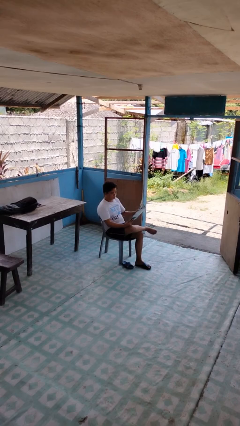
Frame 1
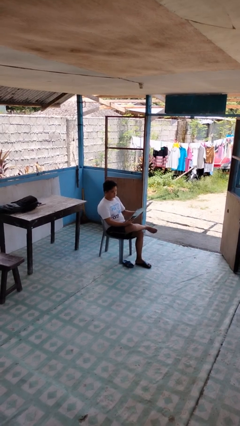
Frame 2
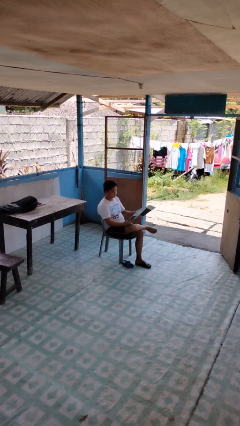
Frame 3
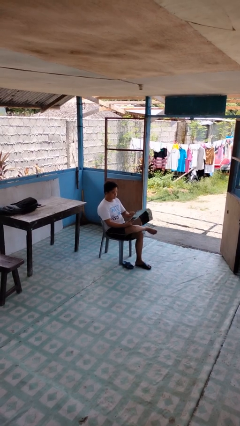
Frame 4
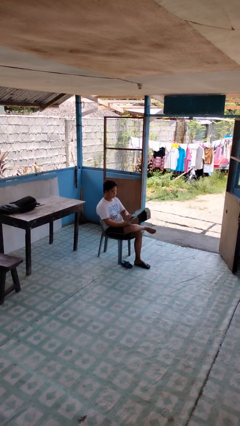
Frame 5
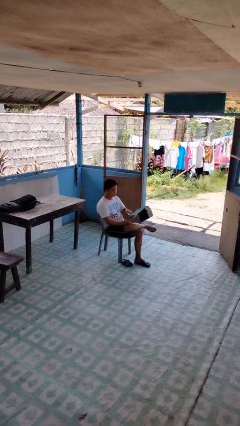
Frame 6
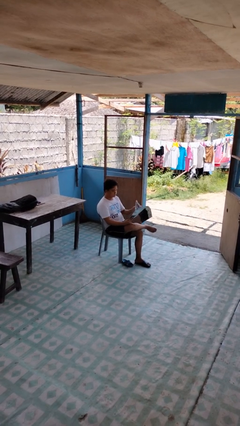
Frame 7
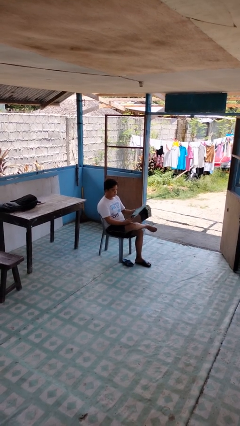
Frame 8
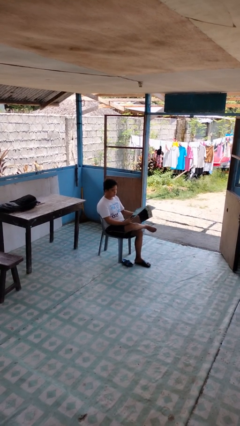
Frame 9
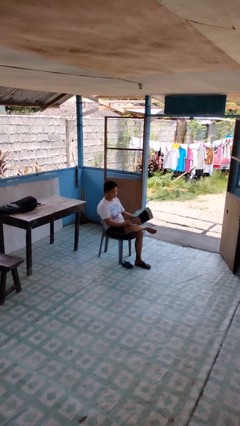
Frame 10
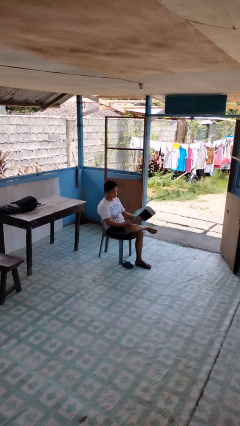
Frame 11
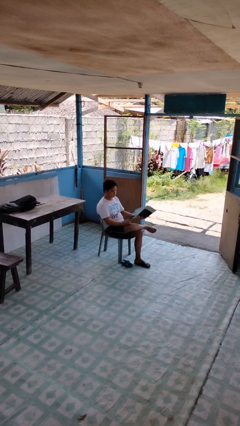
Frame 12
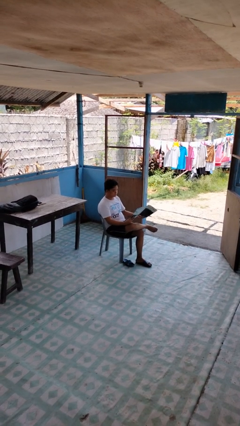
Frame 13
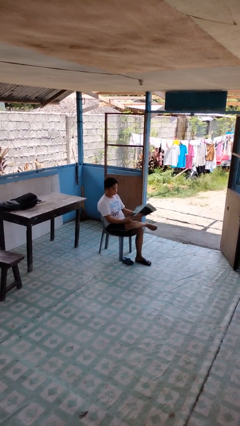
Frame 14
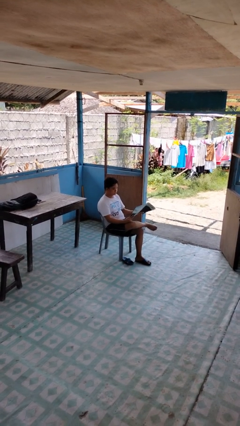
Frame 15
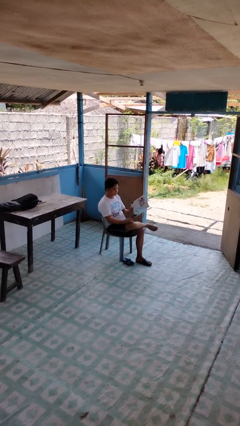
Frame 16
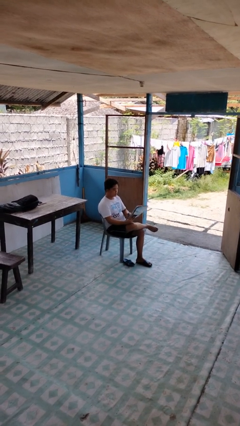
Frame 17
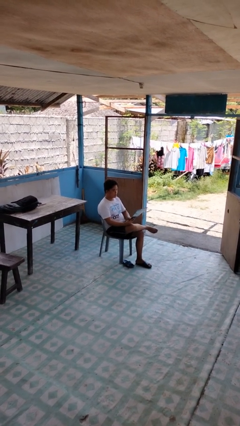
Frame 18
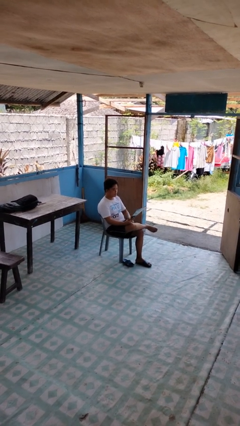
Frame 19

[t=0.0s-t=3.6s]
person reads magazine

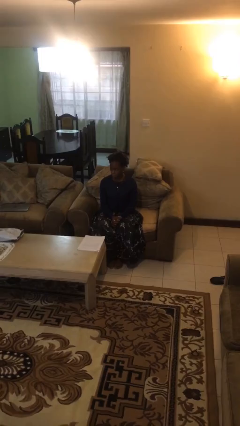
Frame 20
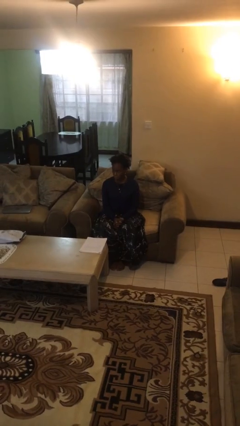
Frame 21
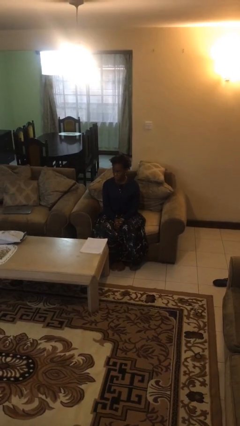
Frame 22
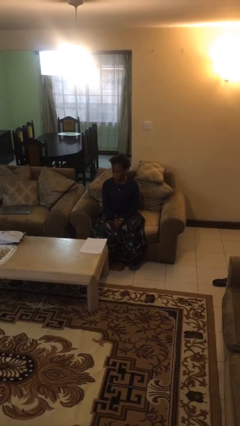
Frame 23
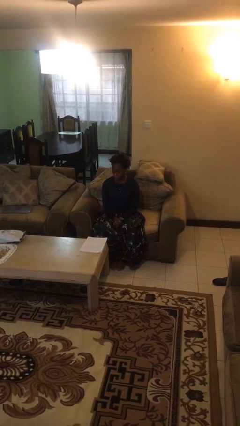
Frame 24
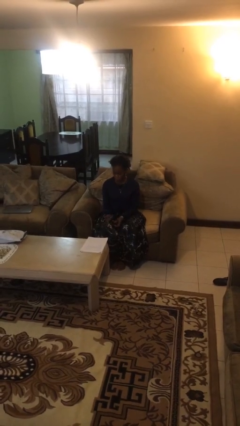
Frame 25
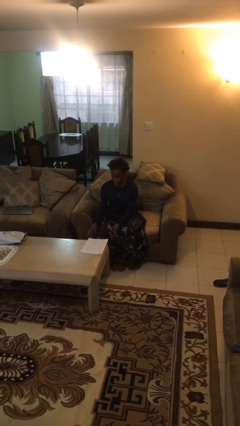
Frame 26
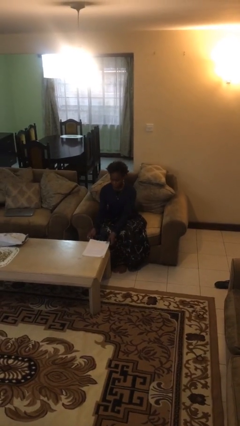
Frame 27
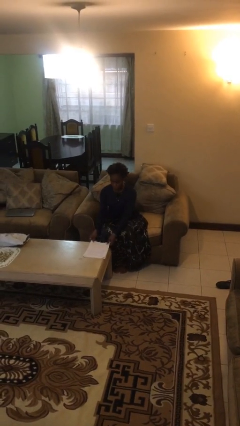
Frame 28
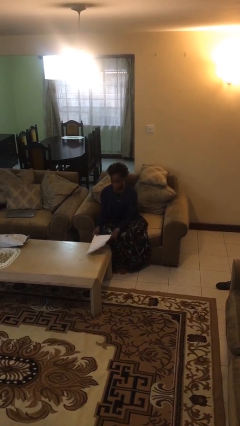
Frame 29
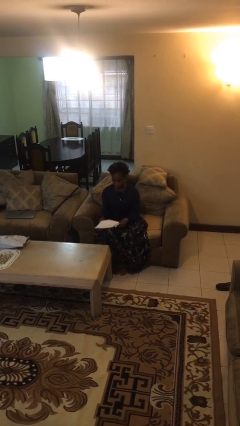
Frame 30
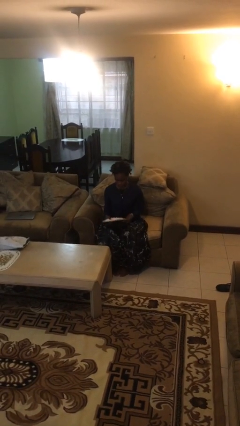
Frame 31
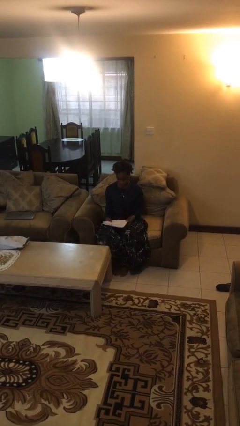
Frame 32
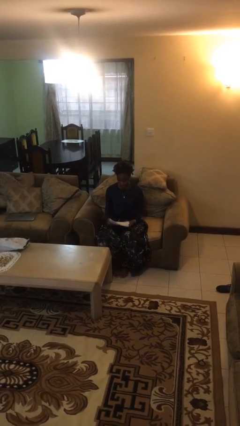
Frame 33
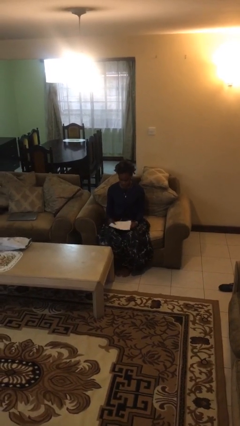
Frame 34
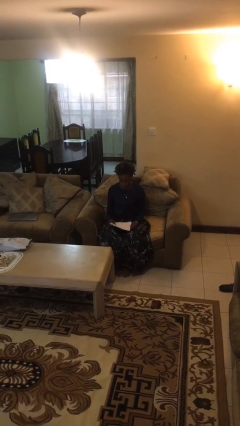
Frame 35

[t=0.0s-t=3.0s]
person picks up object from table

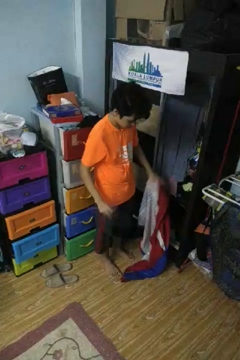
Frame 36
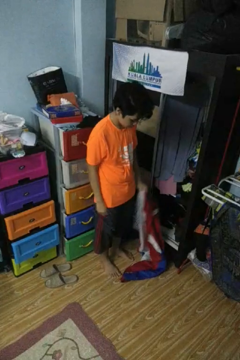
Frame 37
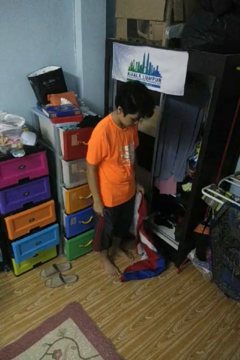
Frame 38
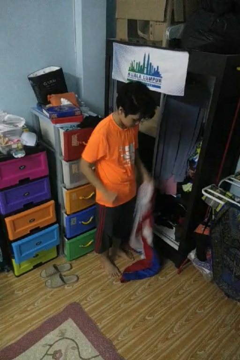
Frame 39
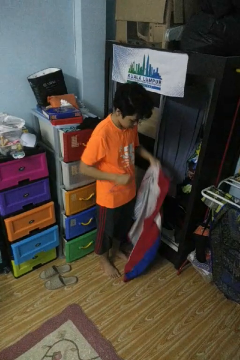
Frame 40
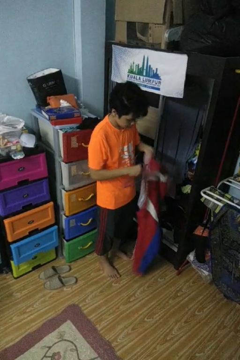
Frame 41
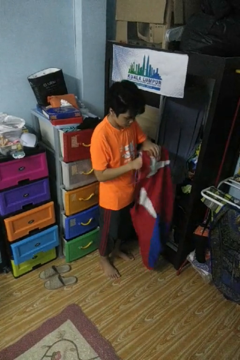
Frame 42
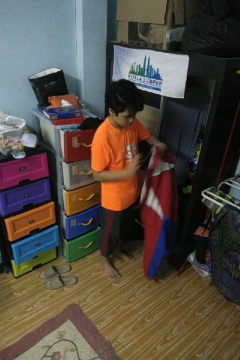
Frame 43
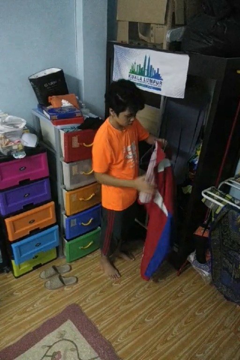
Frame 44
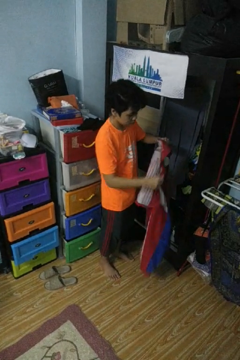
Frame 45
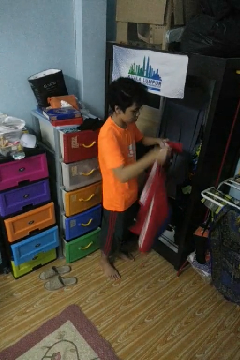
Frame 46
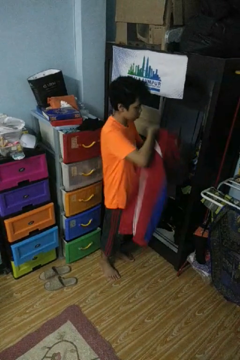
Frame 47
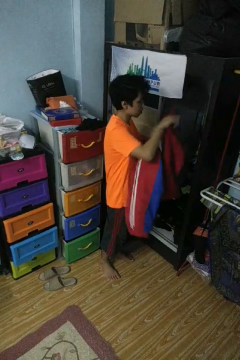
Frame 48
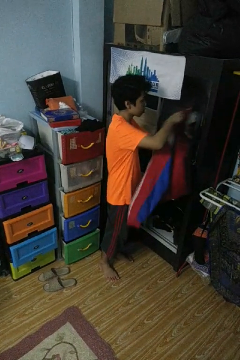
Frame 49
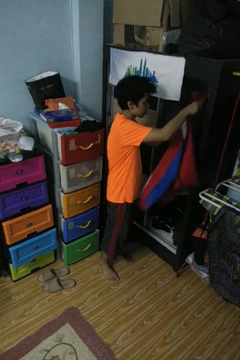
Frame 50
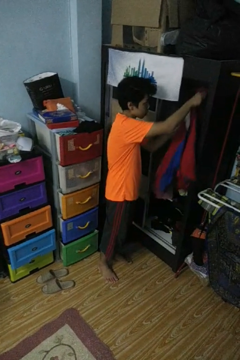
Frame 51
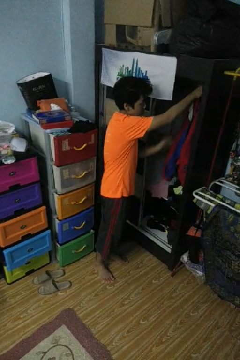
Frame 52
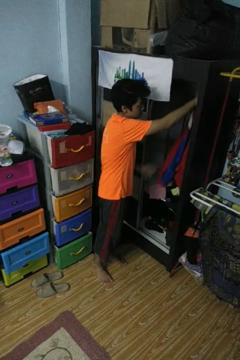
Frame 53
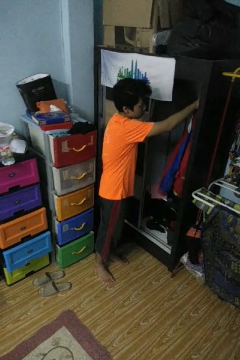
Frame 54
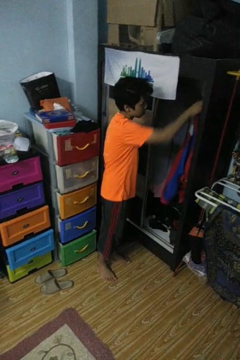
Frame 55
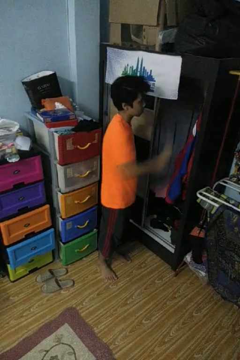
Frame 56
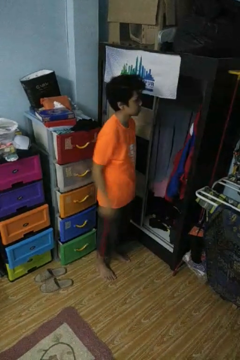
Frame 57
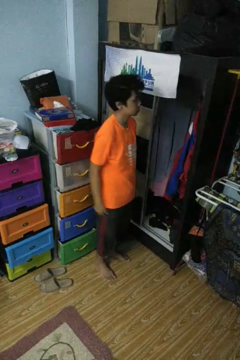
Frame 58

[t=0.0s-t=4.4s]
person puts clothes into closet

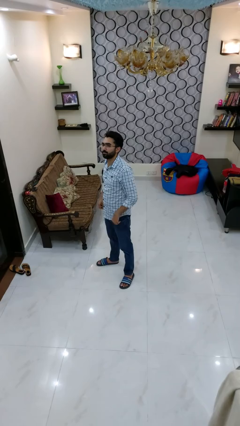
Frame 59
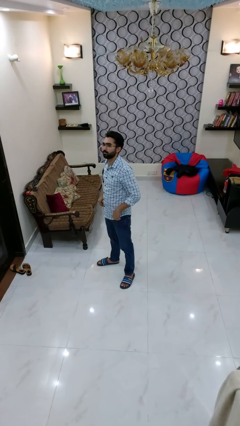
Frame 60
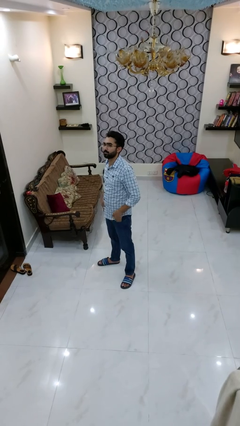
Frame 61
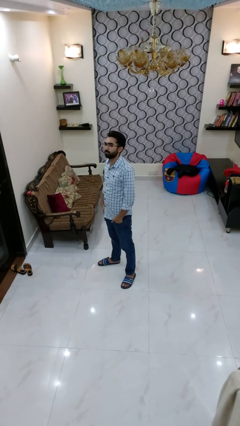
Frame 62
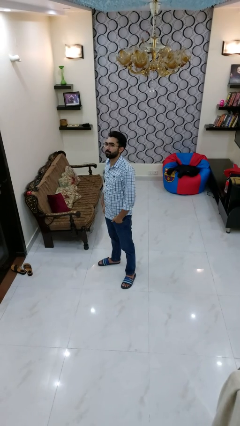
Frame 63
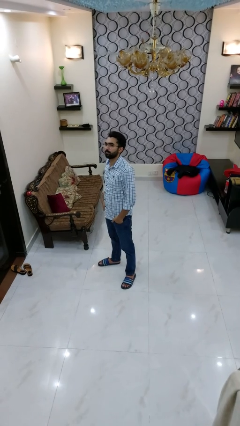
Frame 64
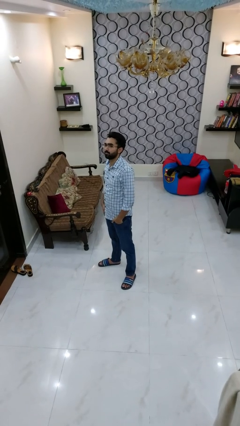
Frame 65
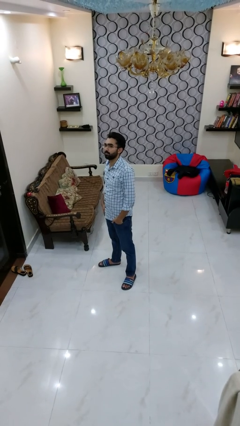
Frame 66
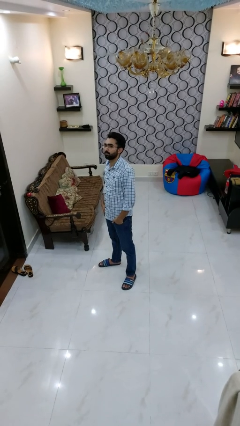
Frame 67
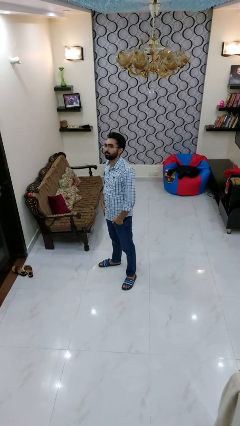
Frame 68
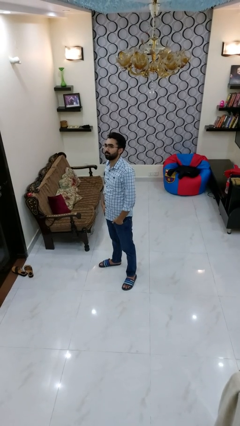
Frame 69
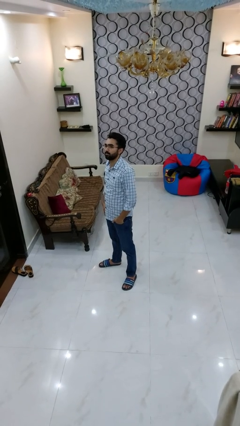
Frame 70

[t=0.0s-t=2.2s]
person puts hands in back pockets

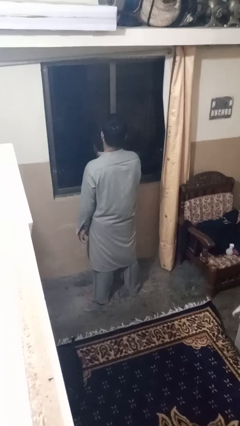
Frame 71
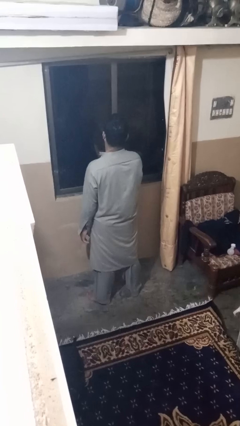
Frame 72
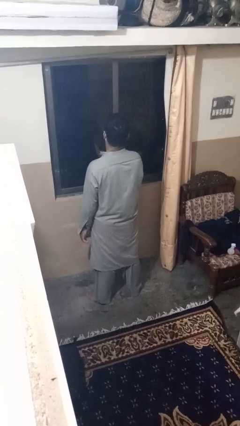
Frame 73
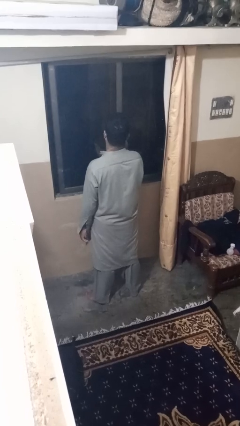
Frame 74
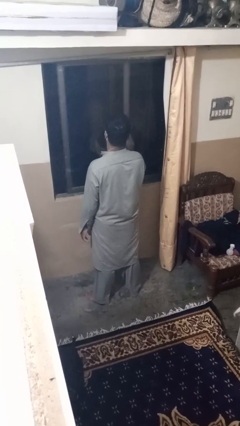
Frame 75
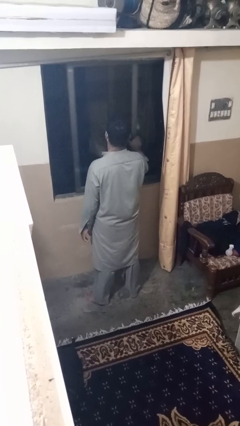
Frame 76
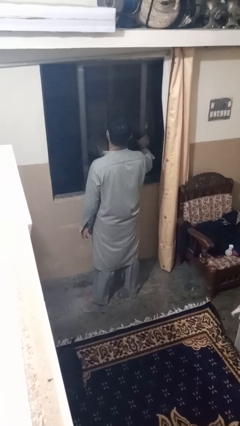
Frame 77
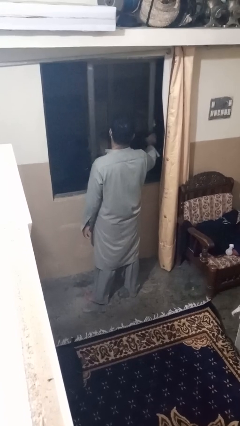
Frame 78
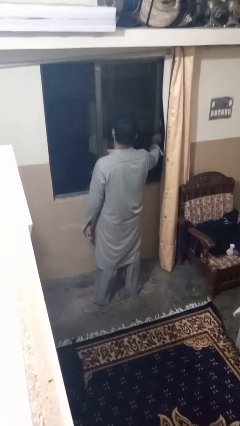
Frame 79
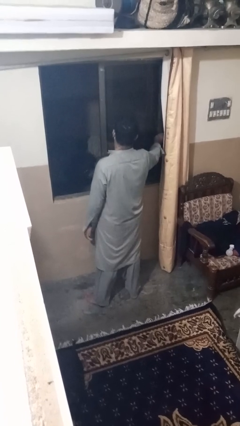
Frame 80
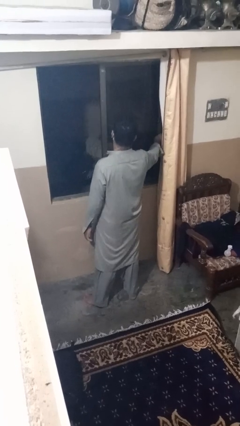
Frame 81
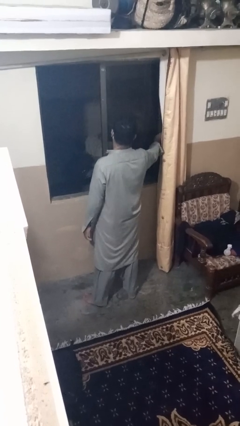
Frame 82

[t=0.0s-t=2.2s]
person opens home window

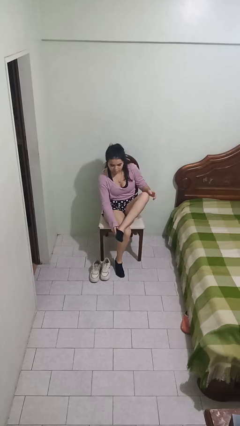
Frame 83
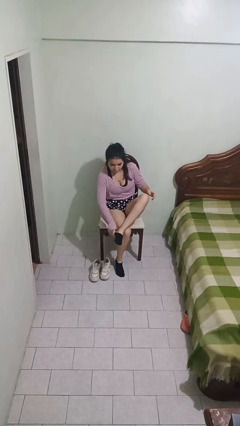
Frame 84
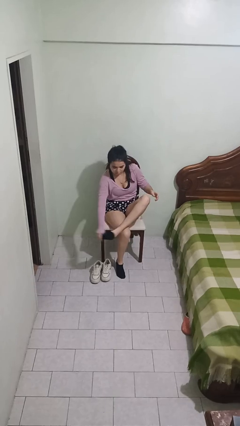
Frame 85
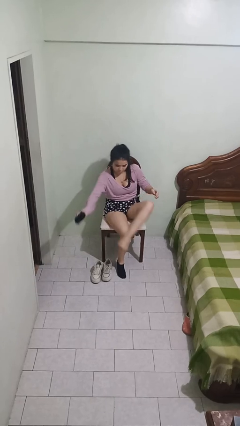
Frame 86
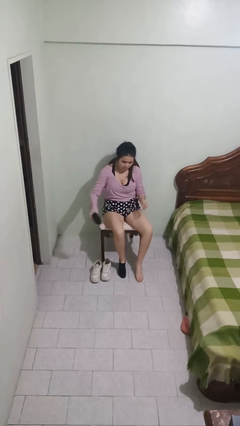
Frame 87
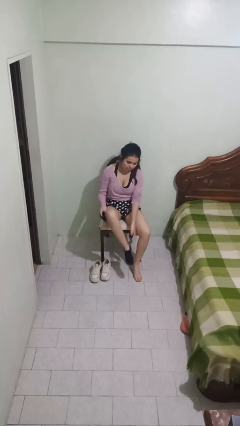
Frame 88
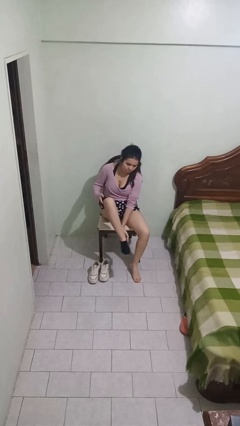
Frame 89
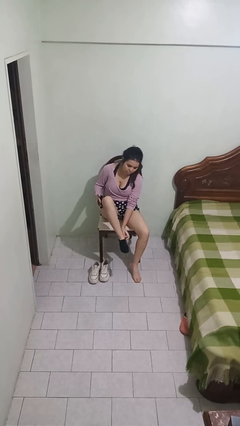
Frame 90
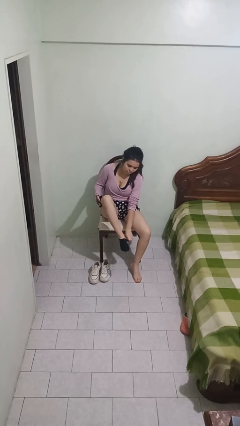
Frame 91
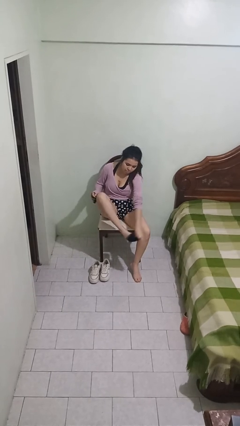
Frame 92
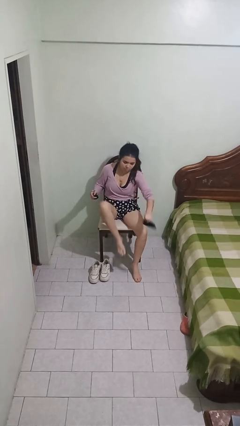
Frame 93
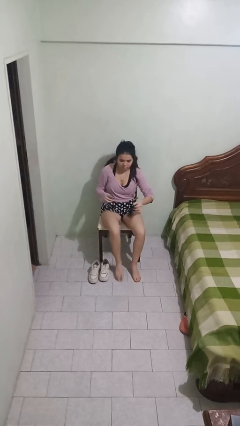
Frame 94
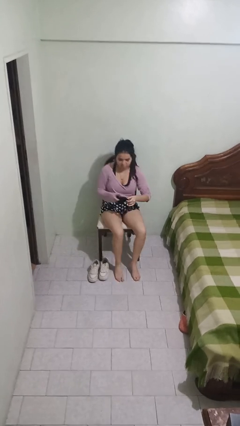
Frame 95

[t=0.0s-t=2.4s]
person takes off socks

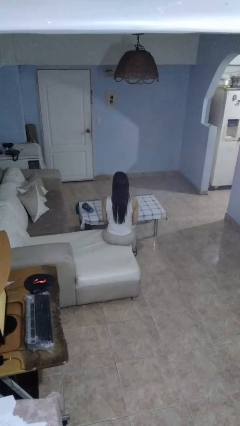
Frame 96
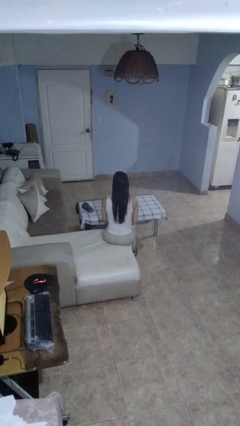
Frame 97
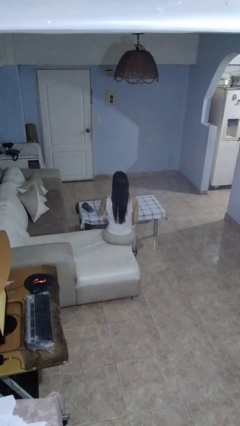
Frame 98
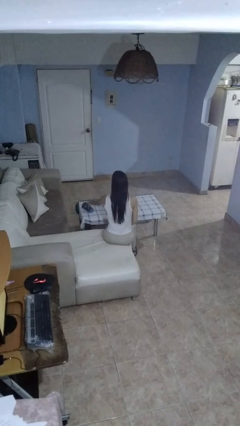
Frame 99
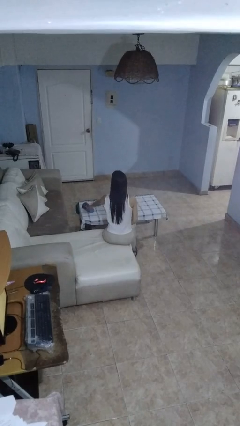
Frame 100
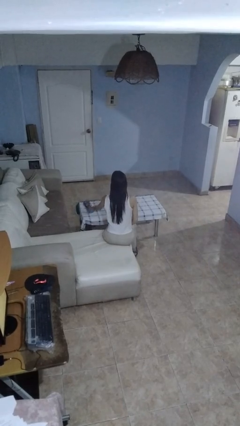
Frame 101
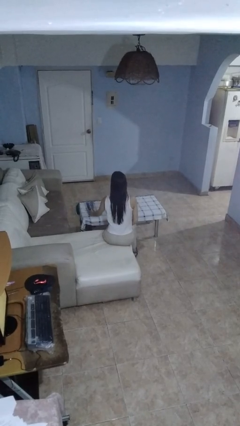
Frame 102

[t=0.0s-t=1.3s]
person sets upright glass
